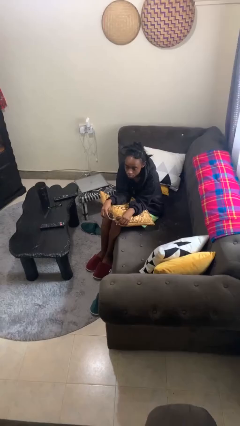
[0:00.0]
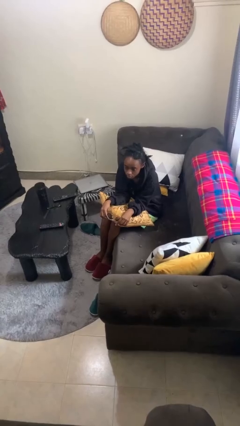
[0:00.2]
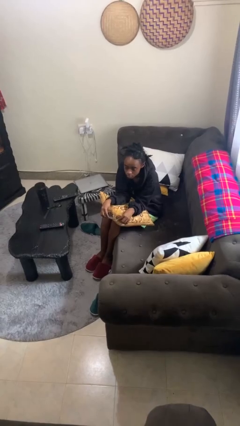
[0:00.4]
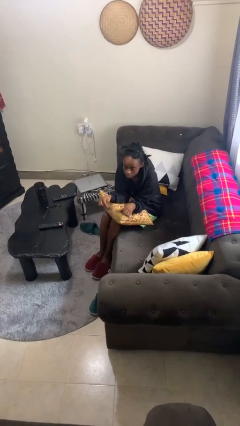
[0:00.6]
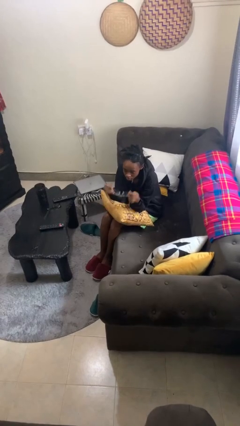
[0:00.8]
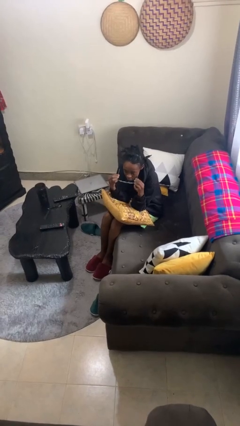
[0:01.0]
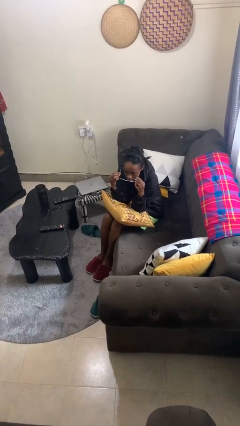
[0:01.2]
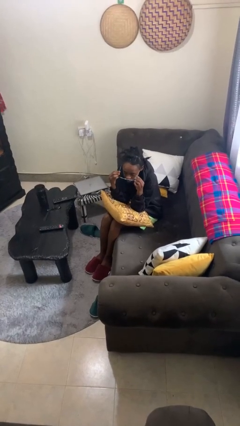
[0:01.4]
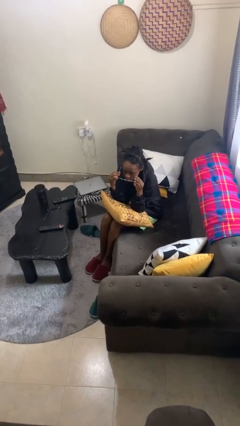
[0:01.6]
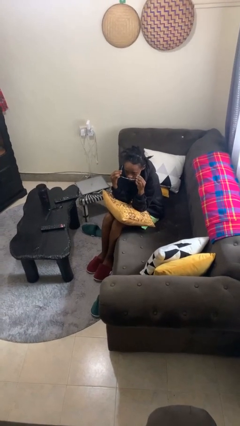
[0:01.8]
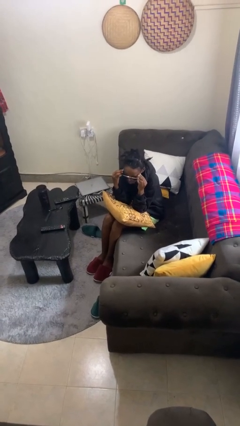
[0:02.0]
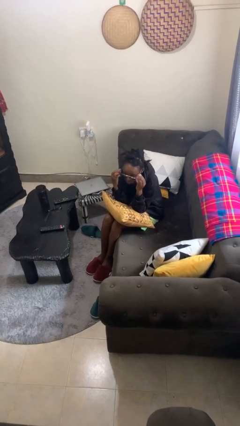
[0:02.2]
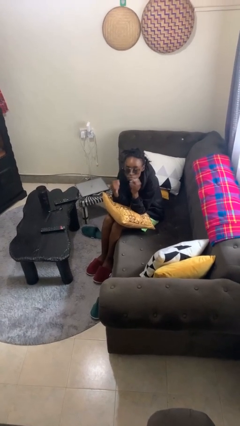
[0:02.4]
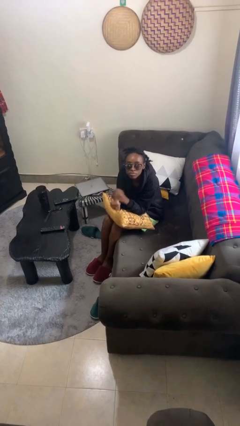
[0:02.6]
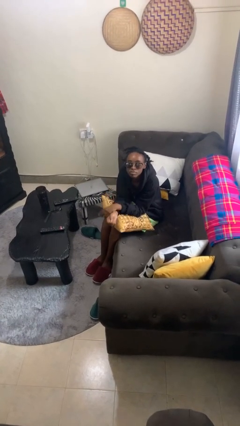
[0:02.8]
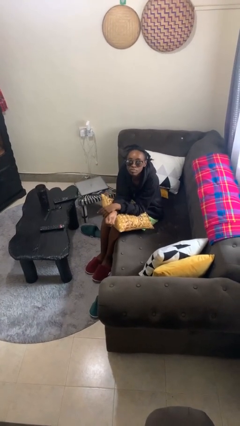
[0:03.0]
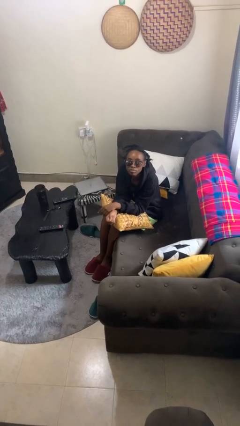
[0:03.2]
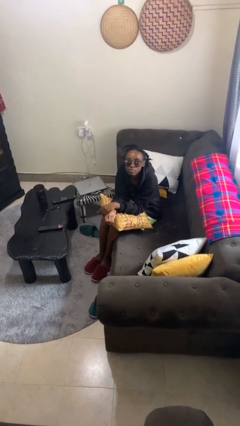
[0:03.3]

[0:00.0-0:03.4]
person puts on sunglasses

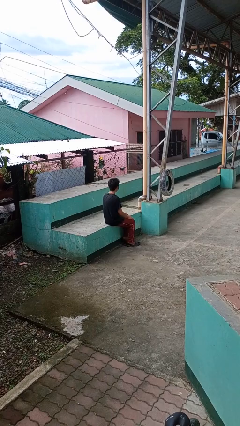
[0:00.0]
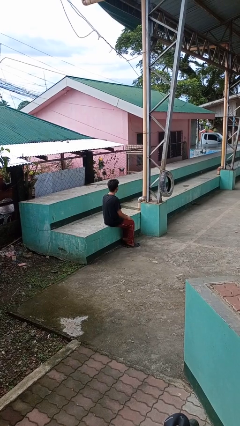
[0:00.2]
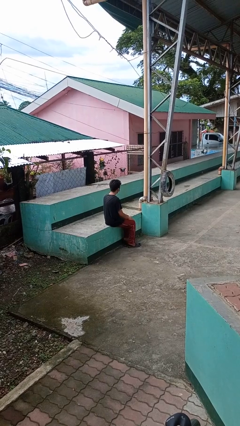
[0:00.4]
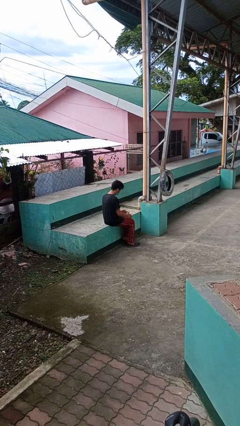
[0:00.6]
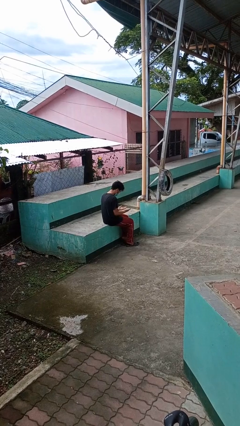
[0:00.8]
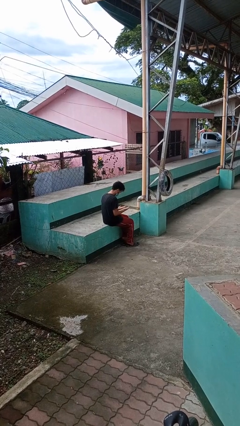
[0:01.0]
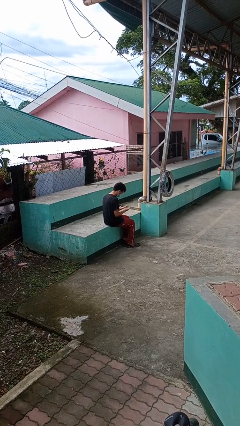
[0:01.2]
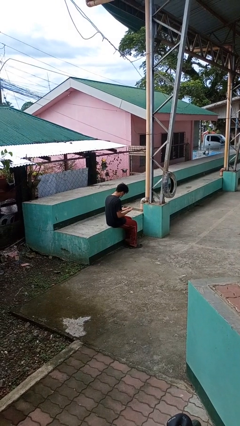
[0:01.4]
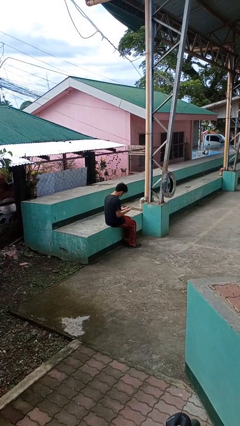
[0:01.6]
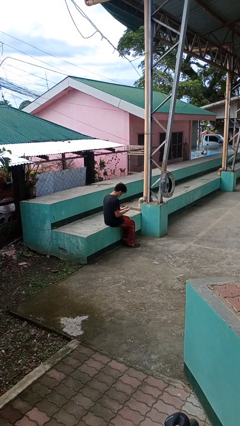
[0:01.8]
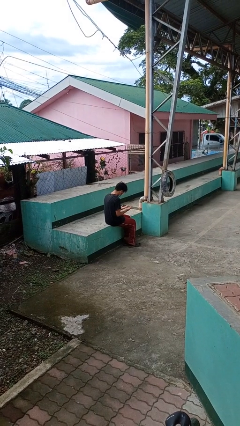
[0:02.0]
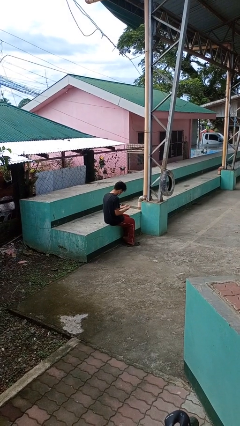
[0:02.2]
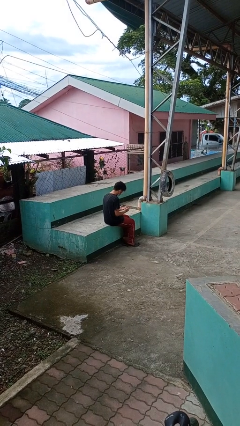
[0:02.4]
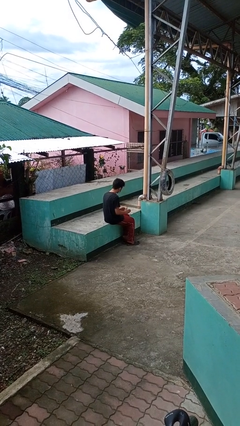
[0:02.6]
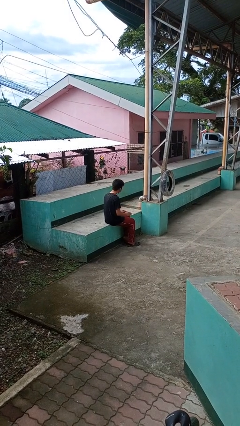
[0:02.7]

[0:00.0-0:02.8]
person looks at hands in lap

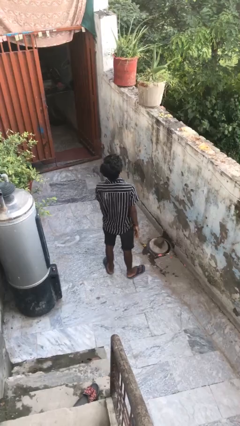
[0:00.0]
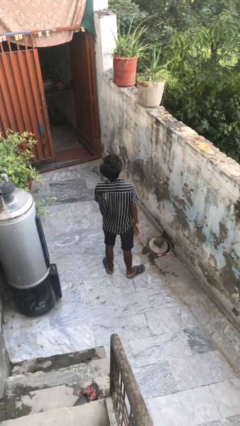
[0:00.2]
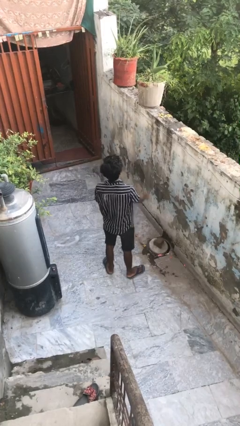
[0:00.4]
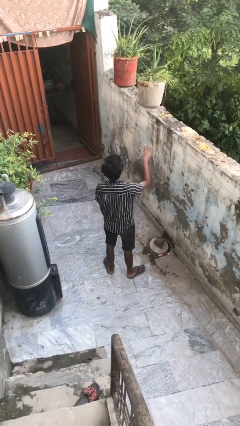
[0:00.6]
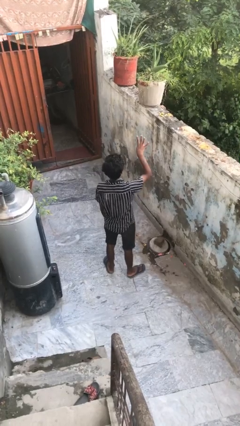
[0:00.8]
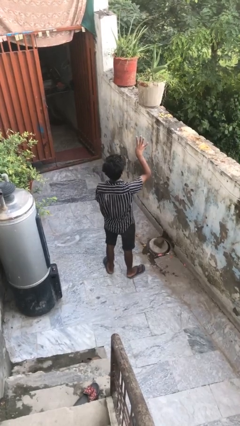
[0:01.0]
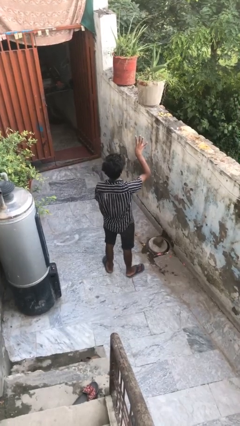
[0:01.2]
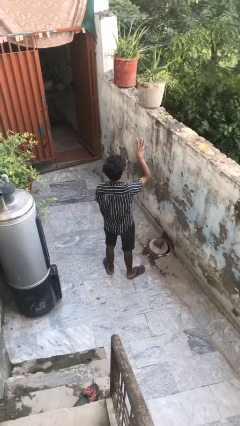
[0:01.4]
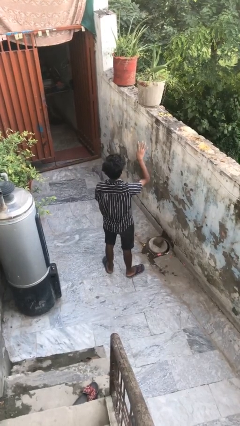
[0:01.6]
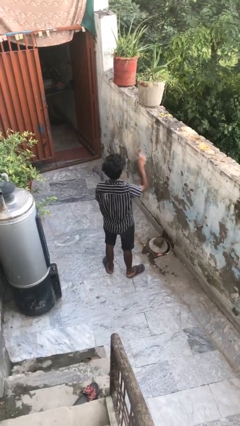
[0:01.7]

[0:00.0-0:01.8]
person gestures number four

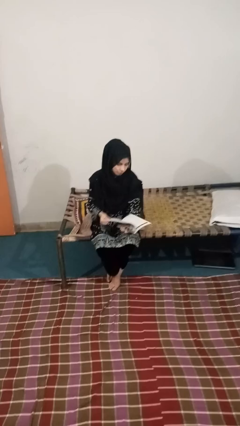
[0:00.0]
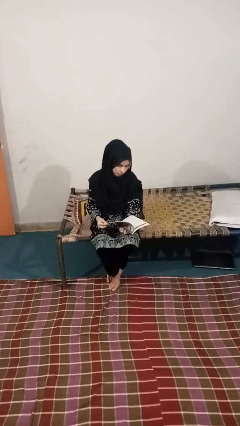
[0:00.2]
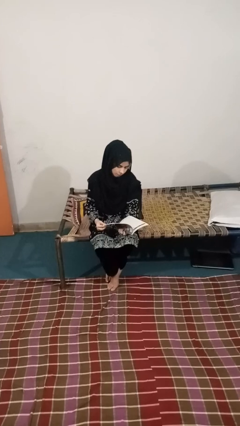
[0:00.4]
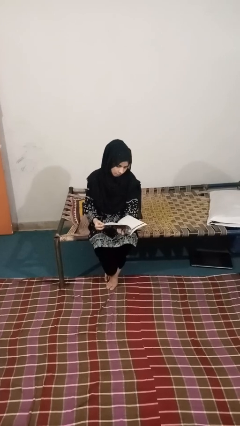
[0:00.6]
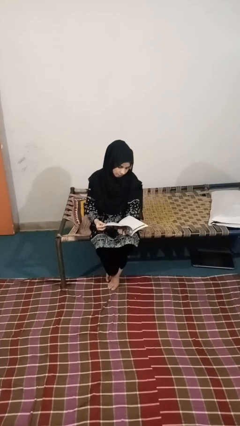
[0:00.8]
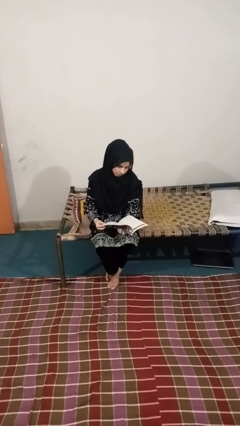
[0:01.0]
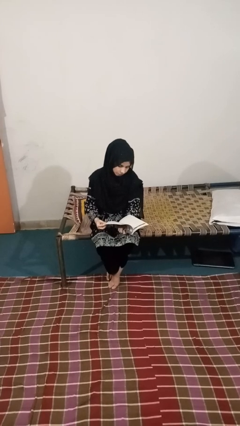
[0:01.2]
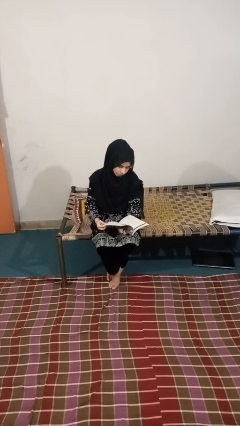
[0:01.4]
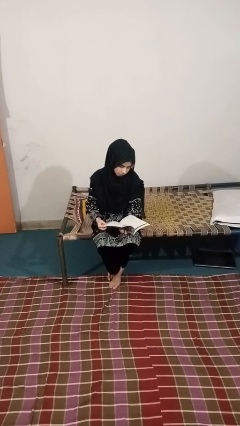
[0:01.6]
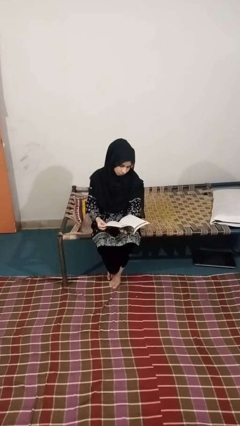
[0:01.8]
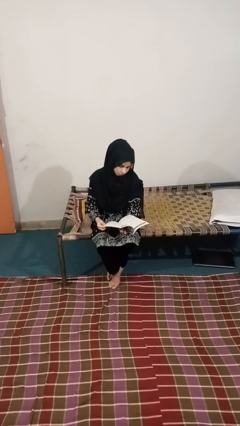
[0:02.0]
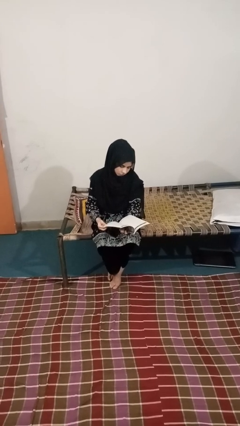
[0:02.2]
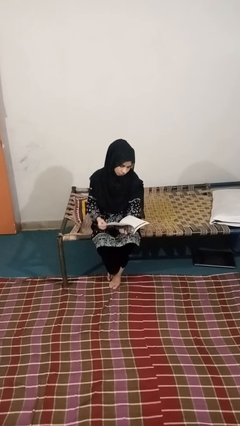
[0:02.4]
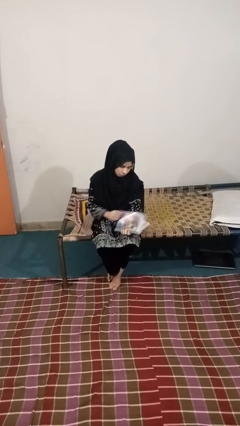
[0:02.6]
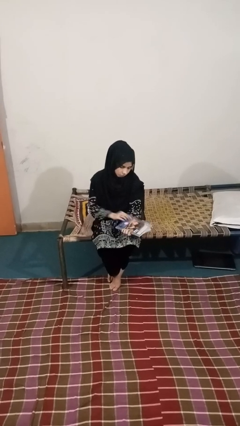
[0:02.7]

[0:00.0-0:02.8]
person reads book

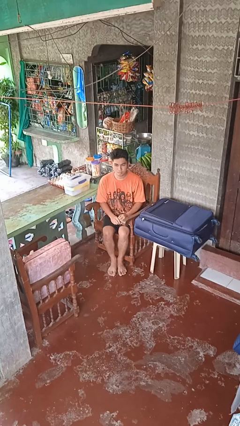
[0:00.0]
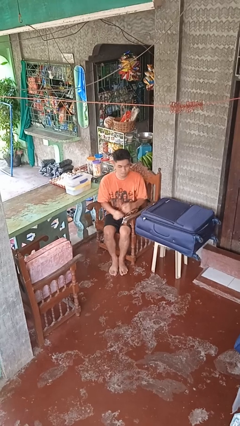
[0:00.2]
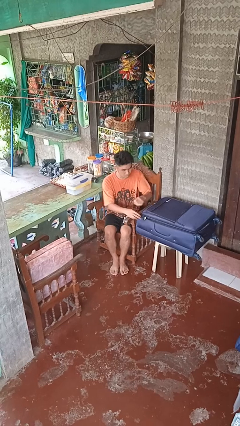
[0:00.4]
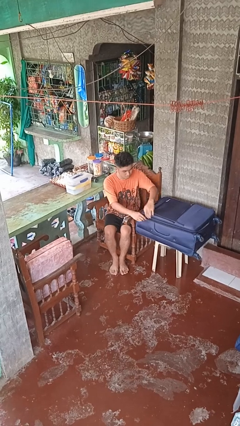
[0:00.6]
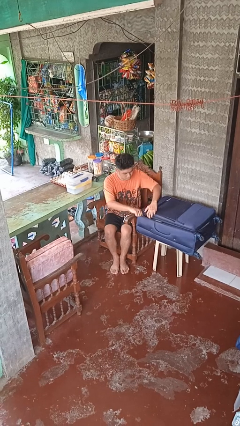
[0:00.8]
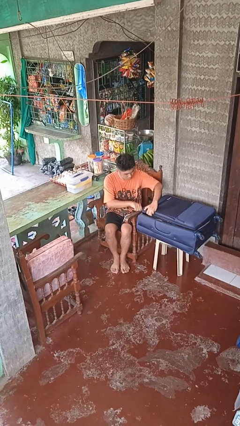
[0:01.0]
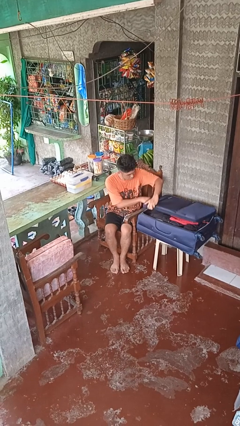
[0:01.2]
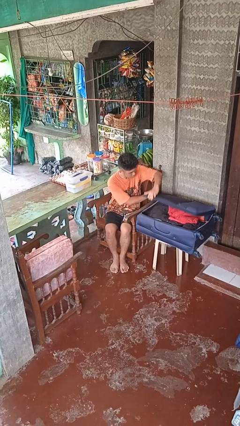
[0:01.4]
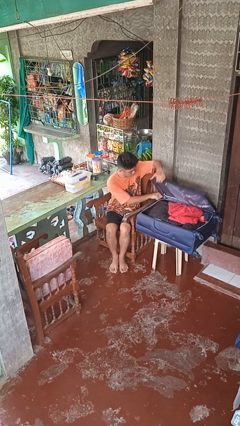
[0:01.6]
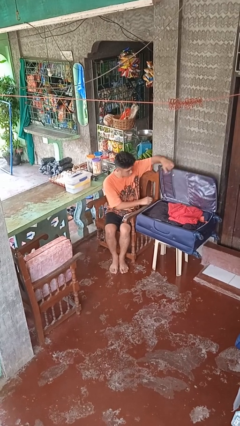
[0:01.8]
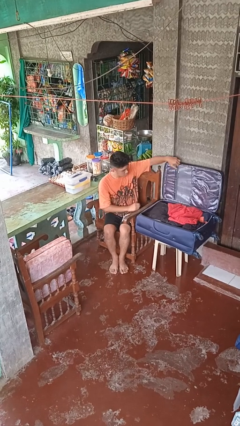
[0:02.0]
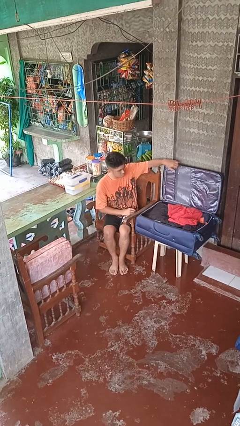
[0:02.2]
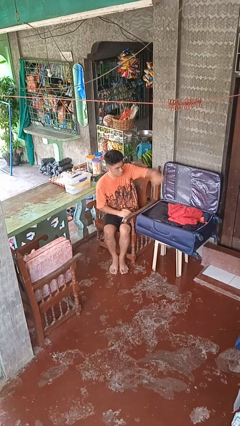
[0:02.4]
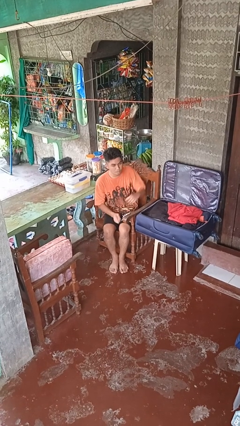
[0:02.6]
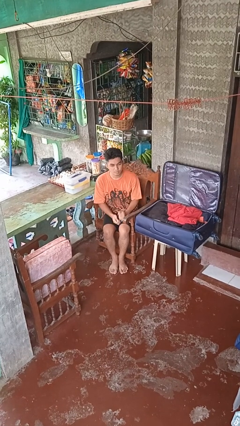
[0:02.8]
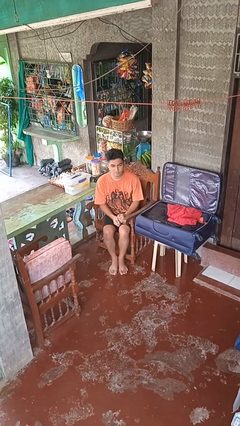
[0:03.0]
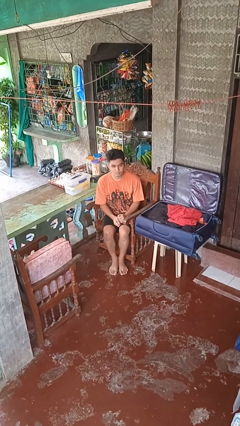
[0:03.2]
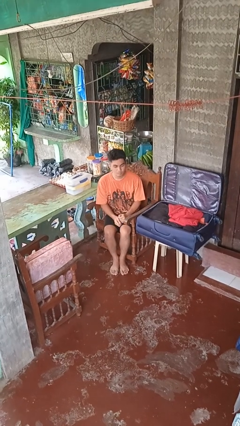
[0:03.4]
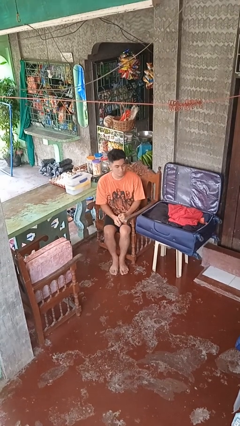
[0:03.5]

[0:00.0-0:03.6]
person opens suitcase

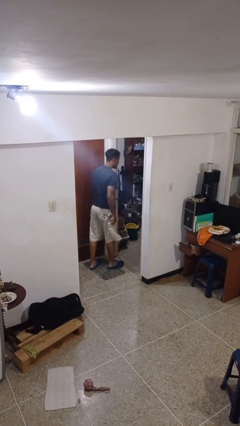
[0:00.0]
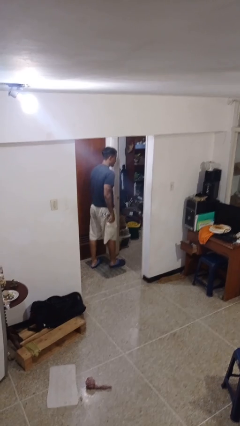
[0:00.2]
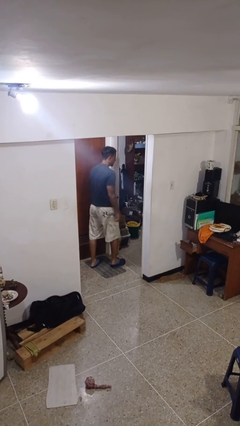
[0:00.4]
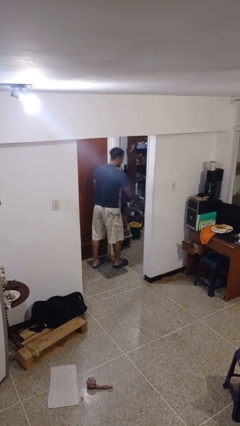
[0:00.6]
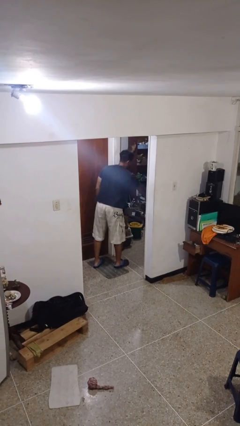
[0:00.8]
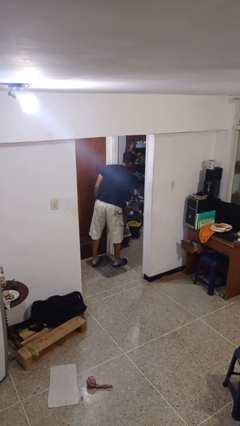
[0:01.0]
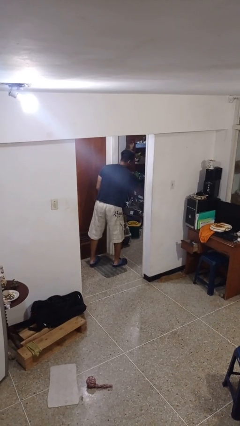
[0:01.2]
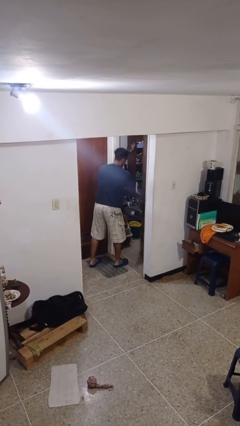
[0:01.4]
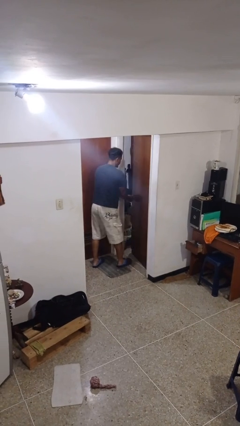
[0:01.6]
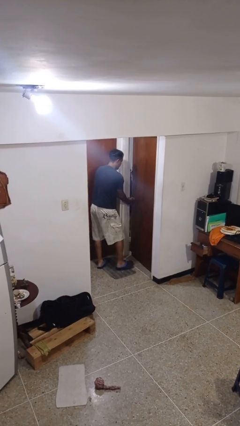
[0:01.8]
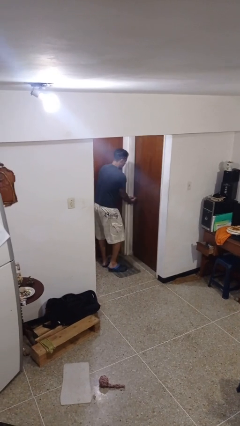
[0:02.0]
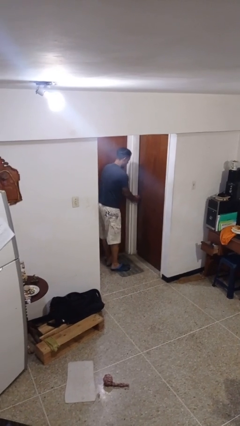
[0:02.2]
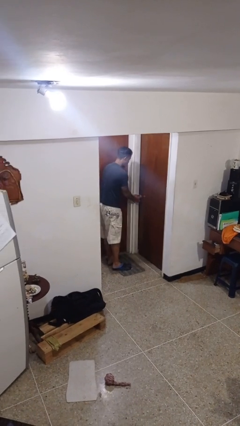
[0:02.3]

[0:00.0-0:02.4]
person closes facility door

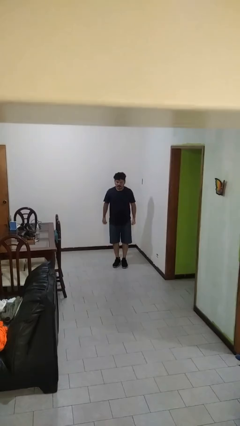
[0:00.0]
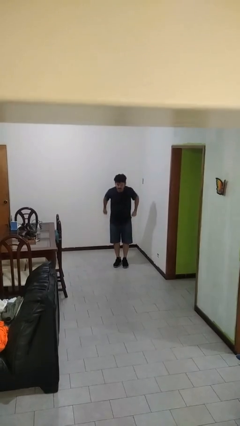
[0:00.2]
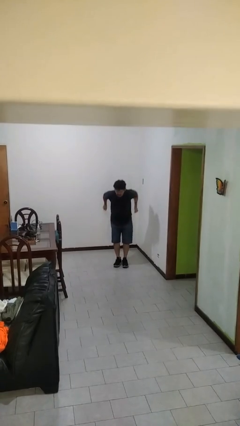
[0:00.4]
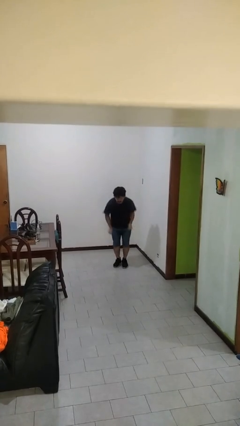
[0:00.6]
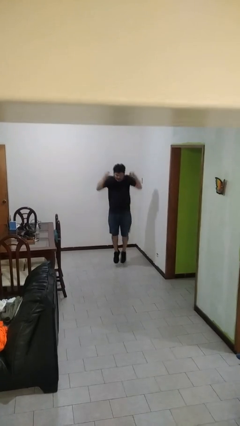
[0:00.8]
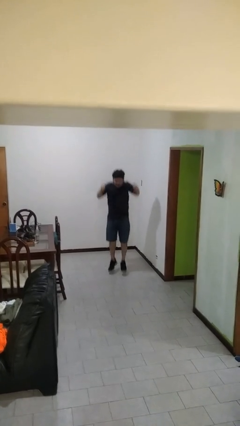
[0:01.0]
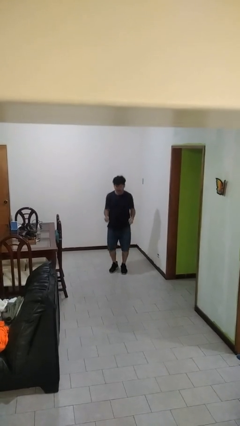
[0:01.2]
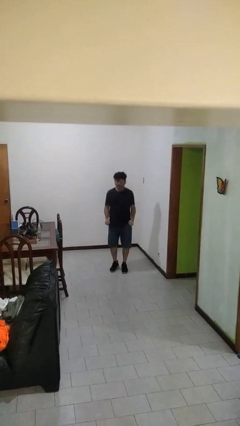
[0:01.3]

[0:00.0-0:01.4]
person jumps
